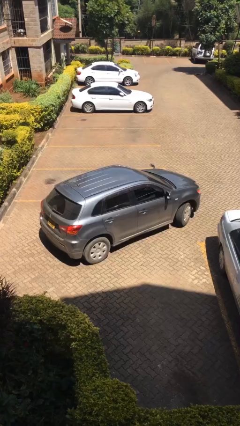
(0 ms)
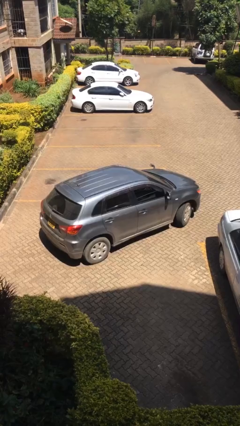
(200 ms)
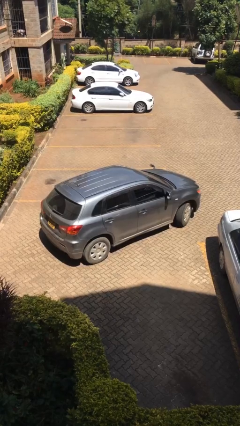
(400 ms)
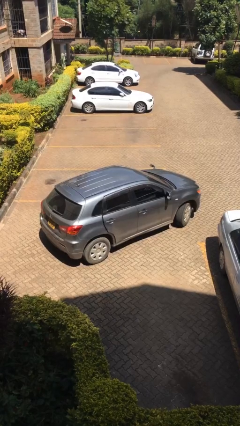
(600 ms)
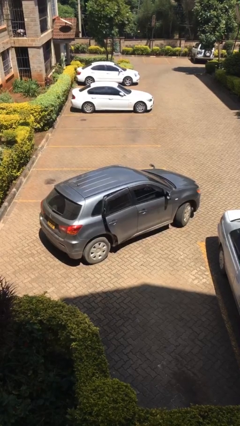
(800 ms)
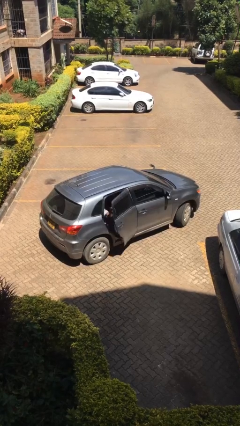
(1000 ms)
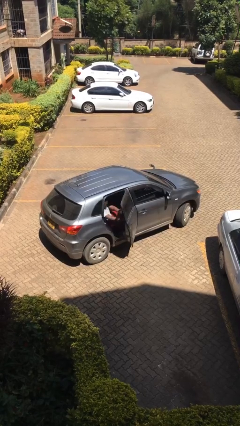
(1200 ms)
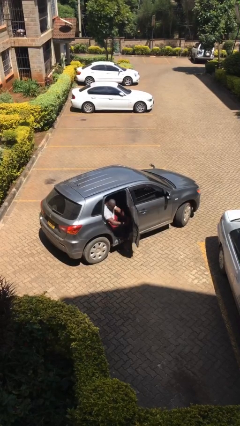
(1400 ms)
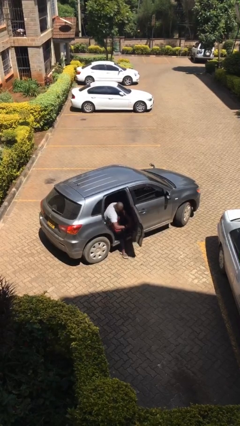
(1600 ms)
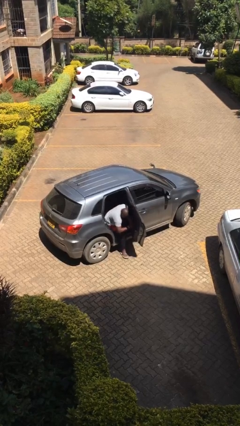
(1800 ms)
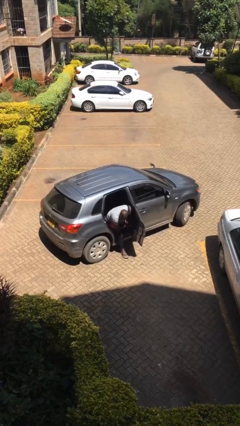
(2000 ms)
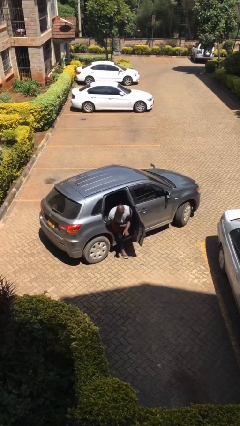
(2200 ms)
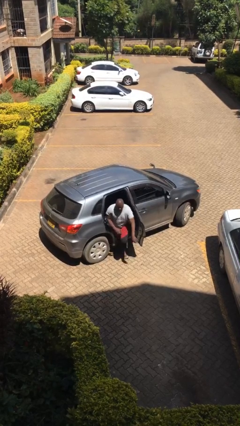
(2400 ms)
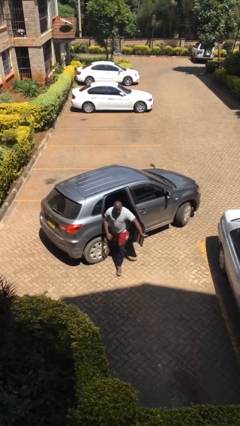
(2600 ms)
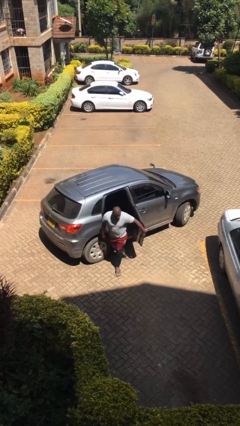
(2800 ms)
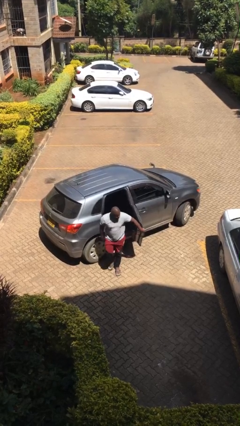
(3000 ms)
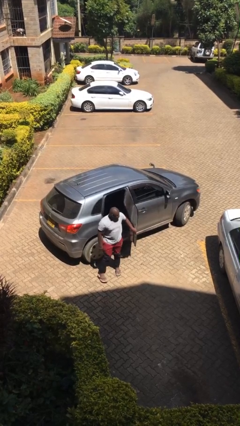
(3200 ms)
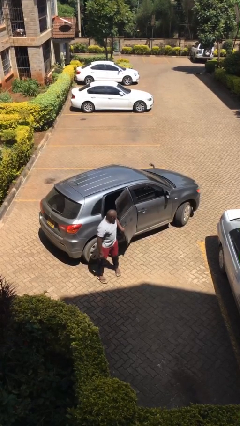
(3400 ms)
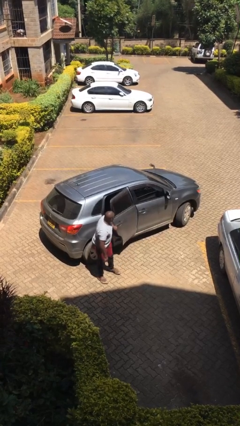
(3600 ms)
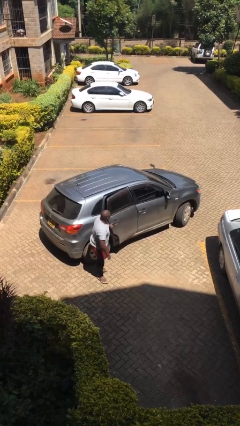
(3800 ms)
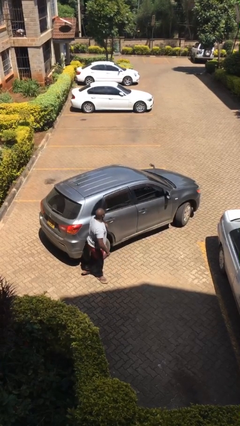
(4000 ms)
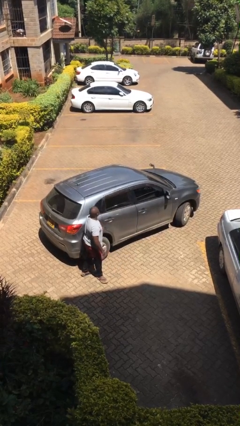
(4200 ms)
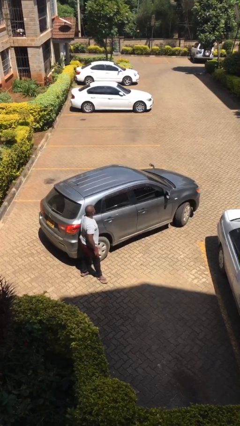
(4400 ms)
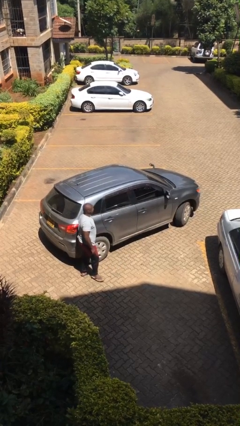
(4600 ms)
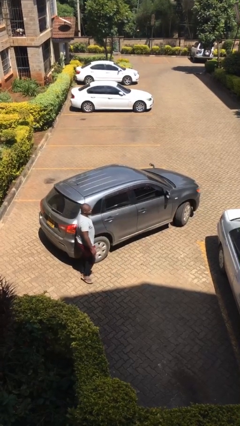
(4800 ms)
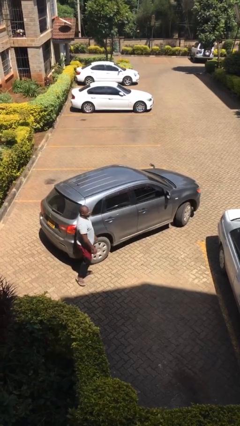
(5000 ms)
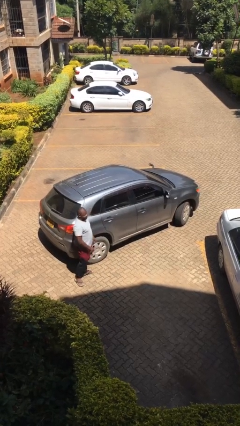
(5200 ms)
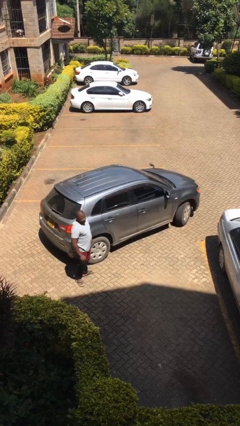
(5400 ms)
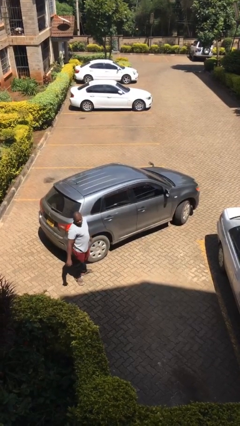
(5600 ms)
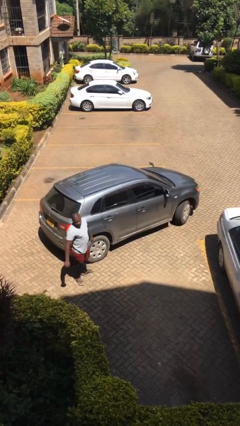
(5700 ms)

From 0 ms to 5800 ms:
car drops off person

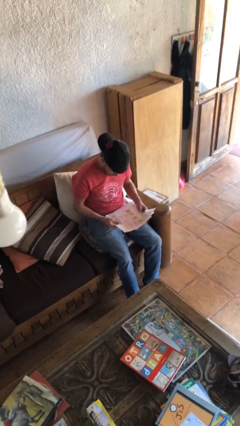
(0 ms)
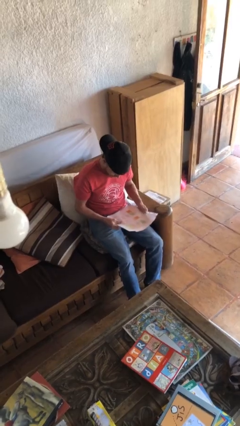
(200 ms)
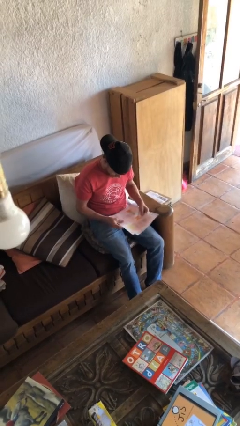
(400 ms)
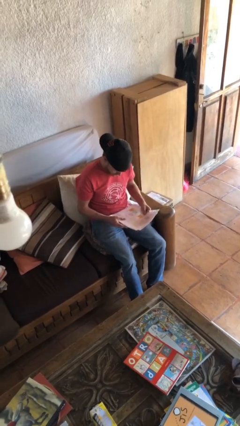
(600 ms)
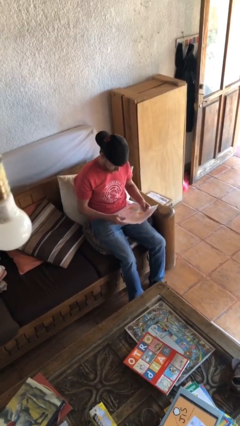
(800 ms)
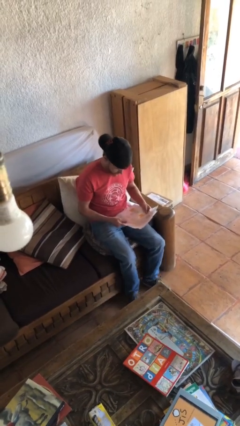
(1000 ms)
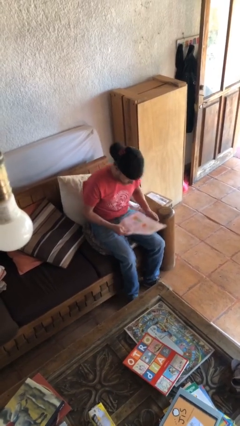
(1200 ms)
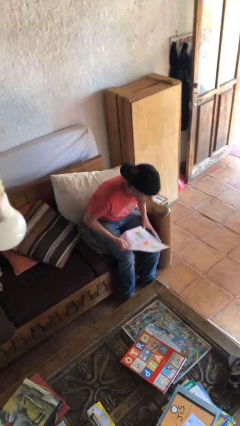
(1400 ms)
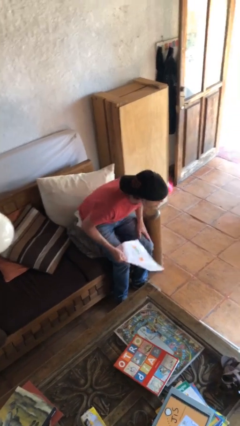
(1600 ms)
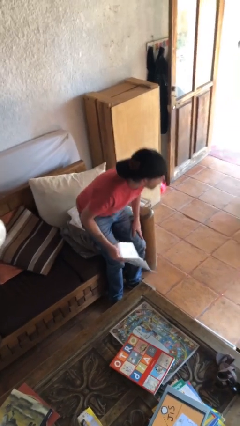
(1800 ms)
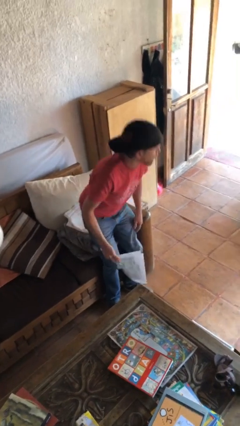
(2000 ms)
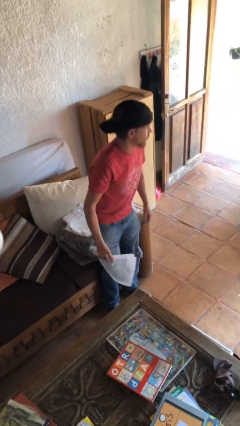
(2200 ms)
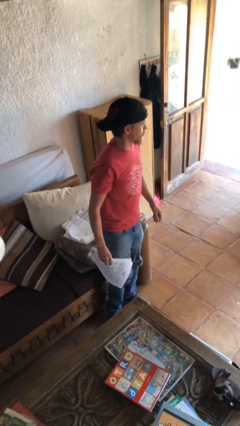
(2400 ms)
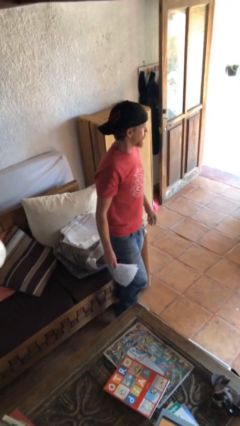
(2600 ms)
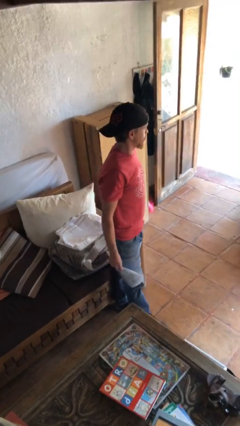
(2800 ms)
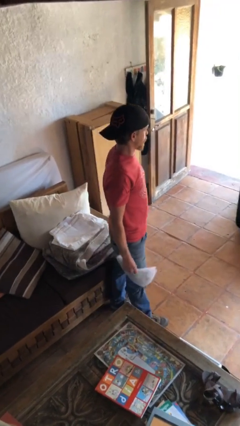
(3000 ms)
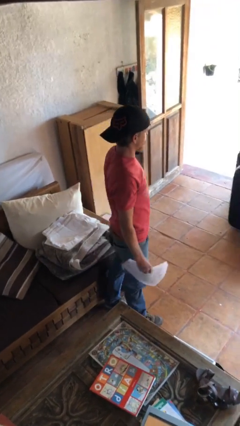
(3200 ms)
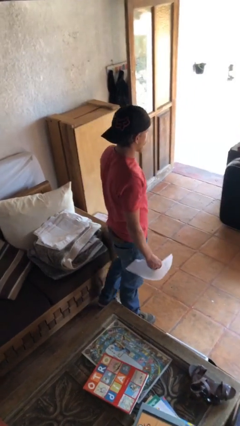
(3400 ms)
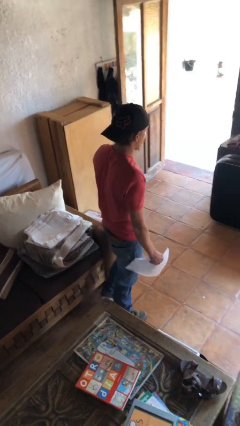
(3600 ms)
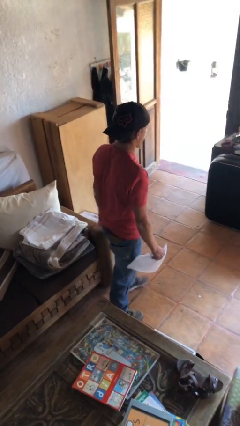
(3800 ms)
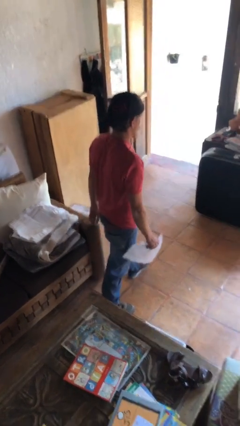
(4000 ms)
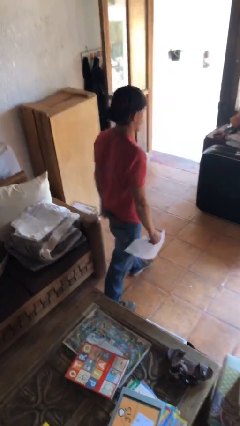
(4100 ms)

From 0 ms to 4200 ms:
person stands up

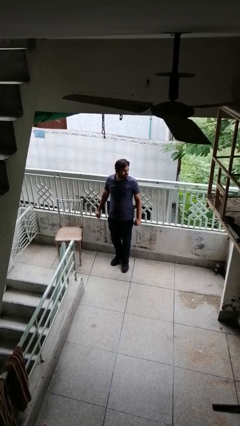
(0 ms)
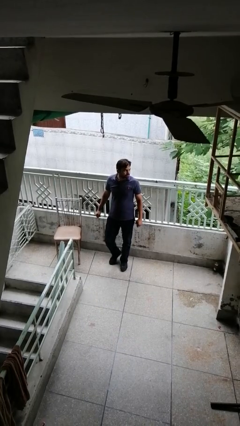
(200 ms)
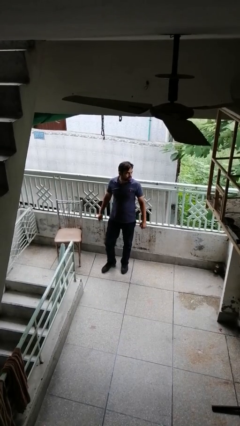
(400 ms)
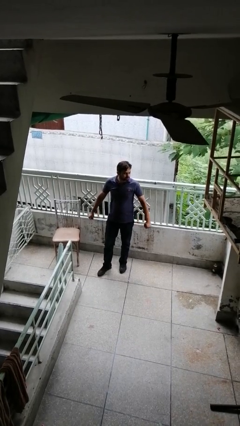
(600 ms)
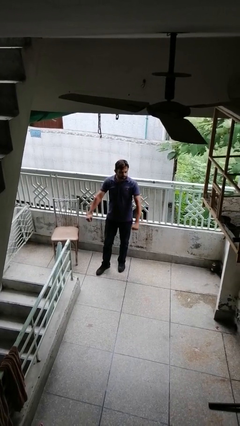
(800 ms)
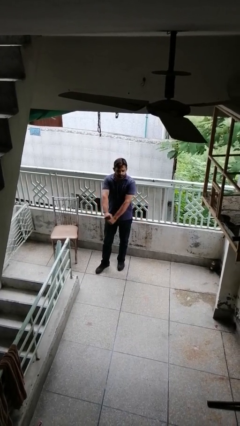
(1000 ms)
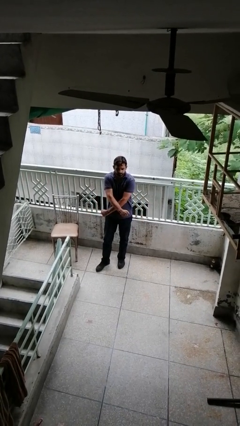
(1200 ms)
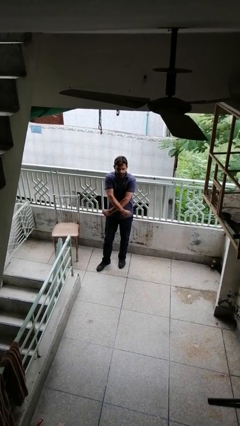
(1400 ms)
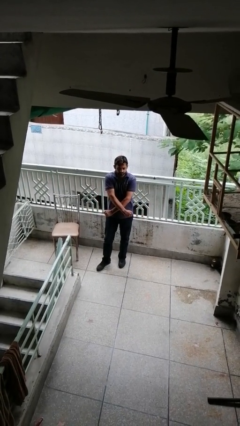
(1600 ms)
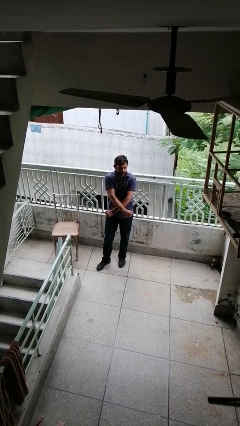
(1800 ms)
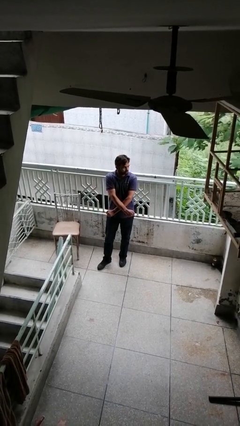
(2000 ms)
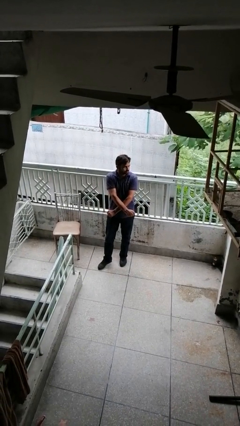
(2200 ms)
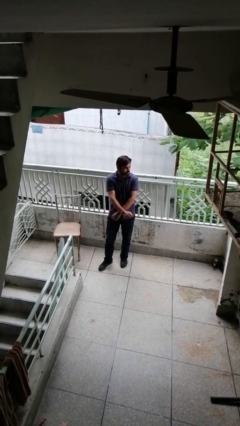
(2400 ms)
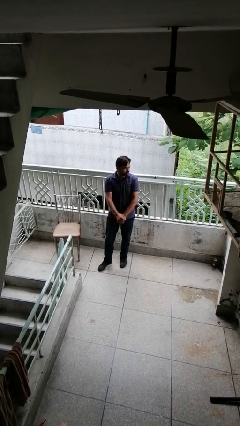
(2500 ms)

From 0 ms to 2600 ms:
person gestures arms x

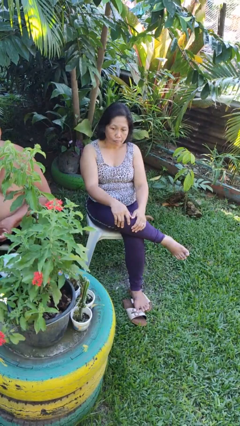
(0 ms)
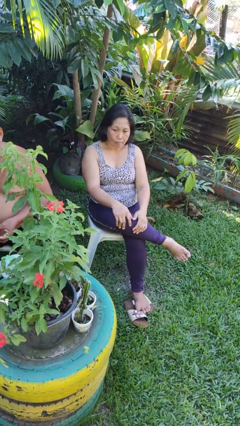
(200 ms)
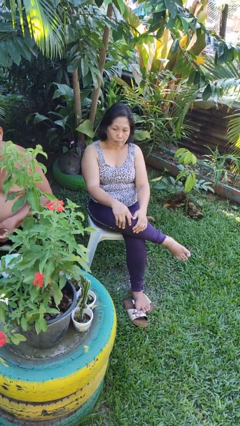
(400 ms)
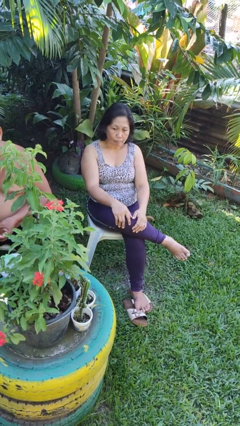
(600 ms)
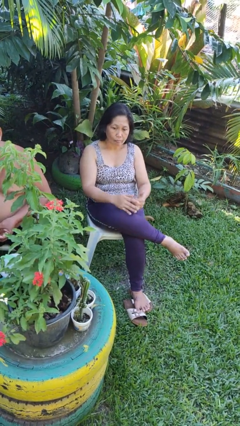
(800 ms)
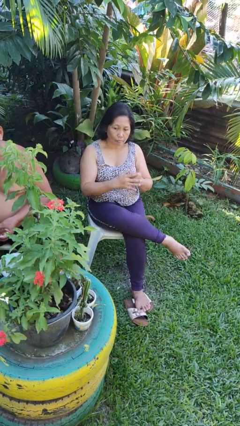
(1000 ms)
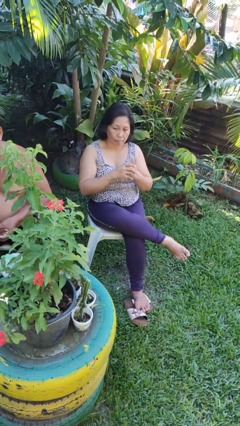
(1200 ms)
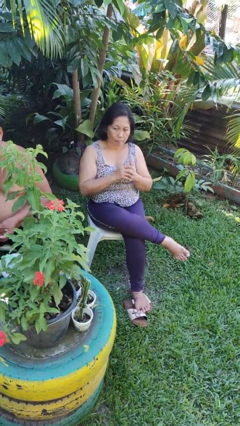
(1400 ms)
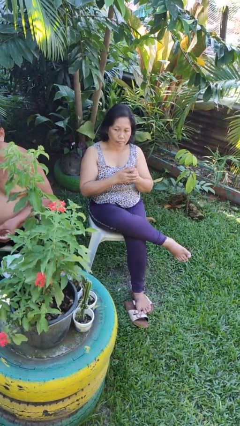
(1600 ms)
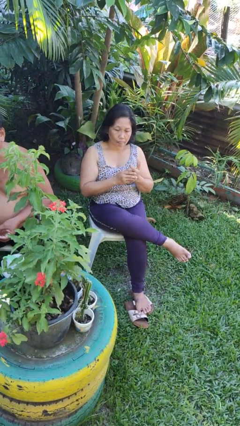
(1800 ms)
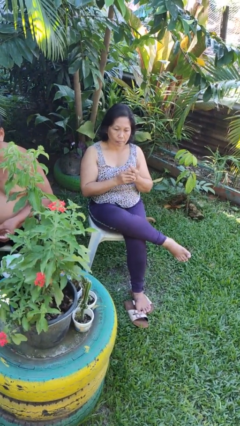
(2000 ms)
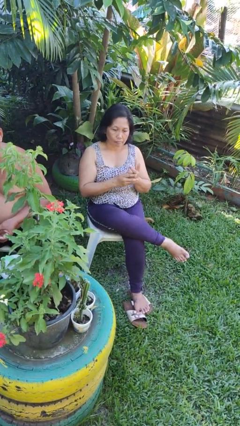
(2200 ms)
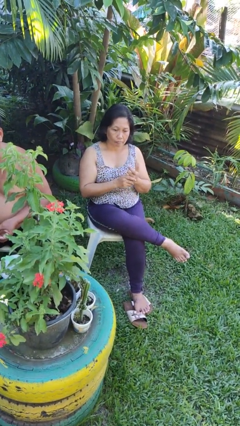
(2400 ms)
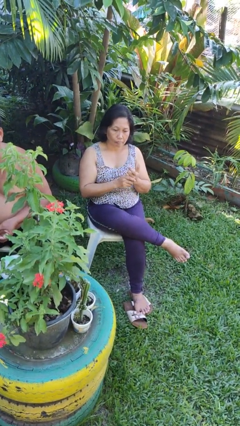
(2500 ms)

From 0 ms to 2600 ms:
person cracks knuckles

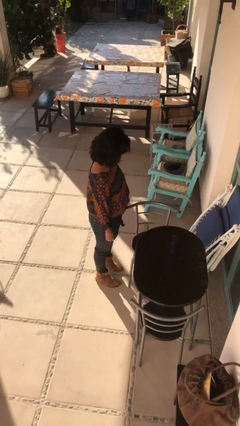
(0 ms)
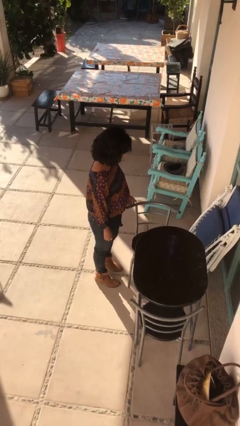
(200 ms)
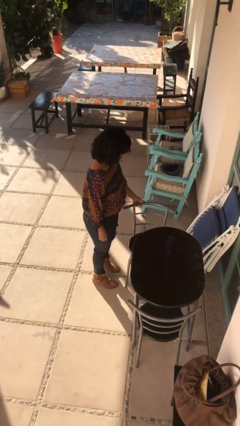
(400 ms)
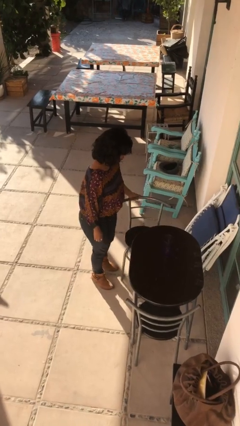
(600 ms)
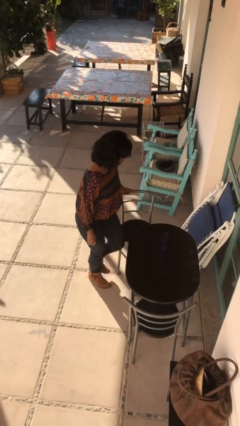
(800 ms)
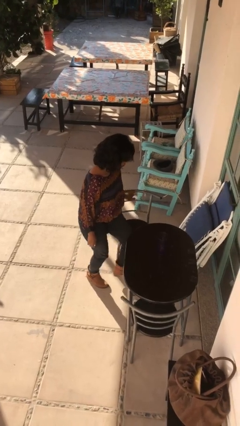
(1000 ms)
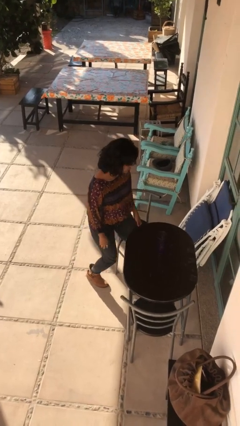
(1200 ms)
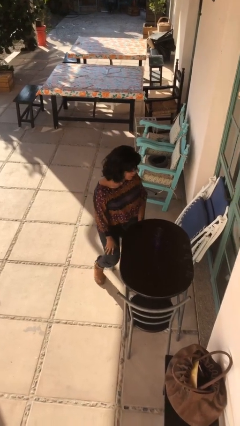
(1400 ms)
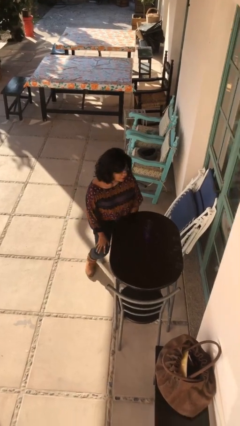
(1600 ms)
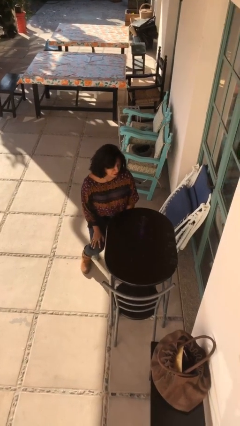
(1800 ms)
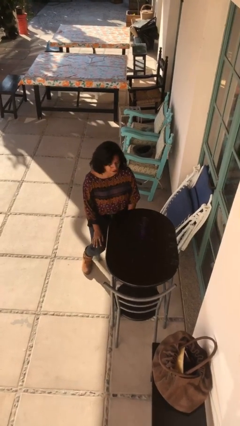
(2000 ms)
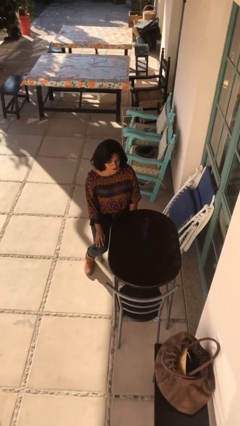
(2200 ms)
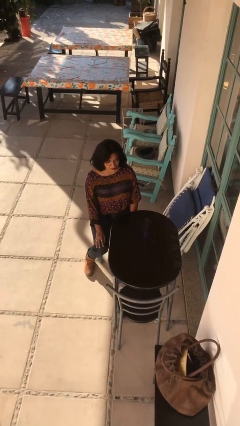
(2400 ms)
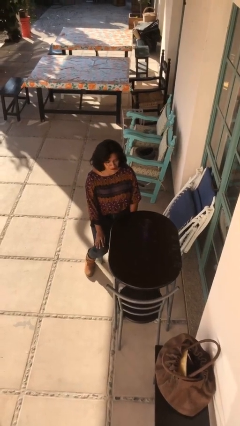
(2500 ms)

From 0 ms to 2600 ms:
person sits down
